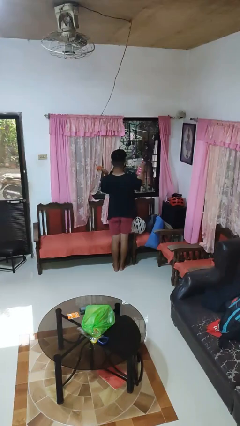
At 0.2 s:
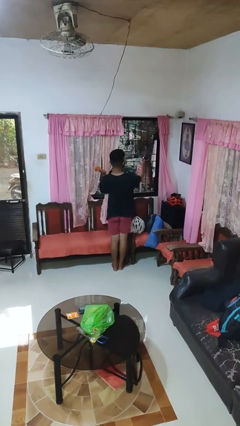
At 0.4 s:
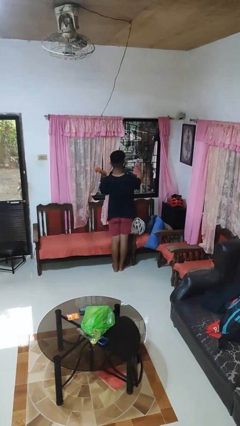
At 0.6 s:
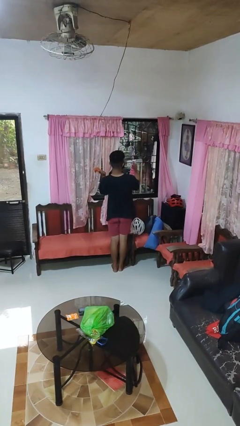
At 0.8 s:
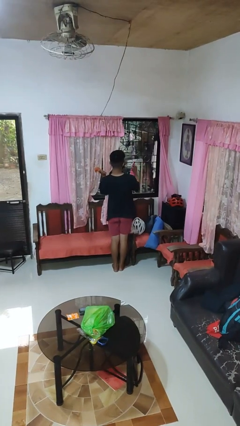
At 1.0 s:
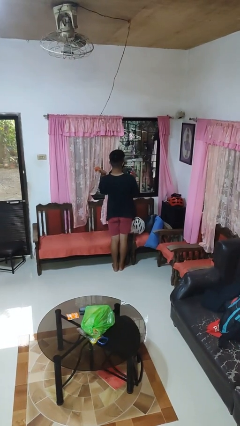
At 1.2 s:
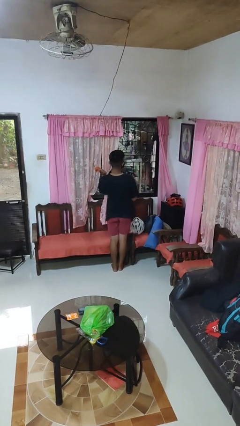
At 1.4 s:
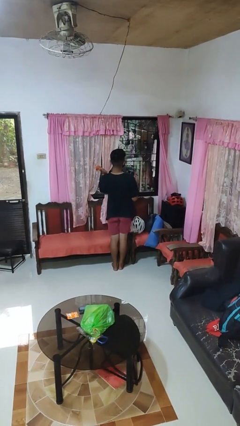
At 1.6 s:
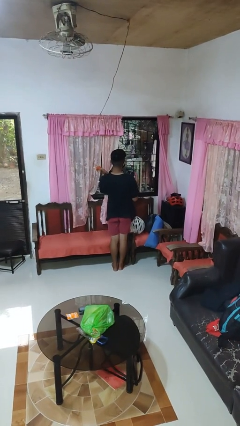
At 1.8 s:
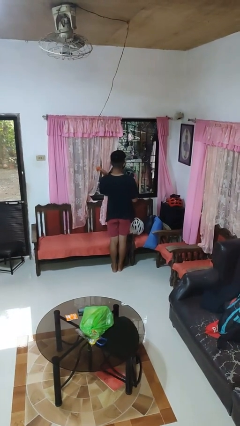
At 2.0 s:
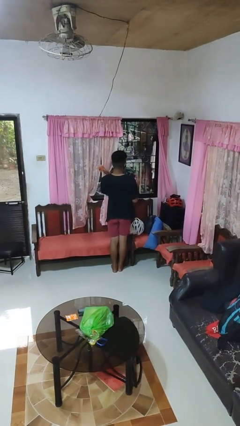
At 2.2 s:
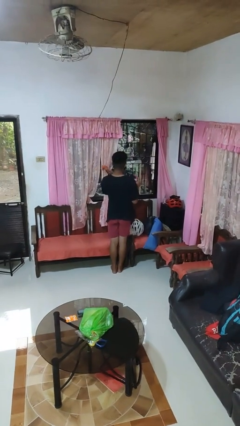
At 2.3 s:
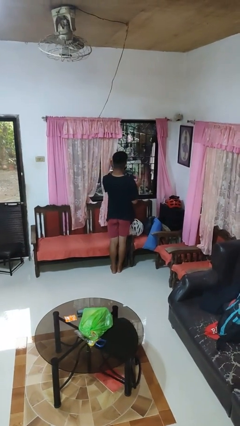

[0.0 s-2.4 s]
person sprays from bottle

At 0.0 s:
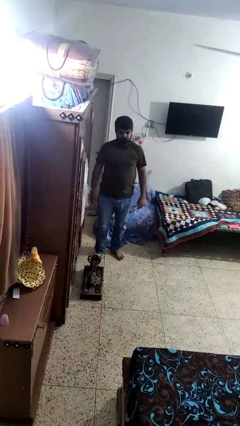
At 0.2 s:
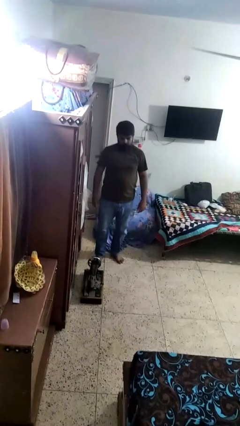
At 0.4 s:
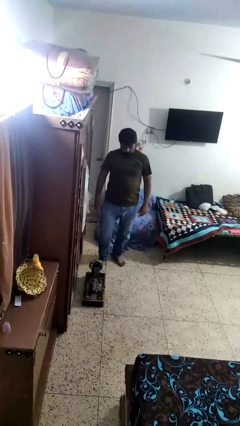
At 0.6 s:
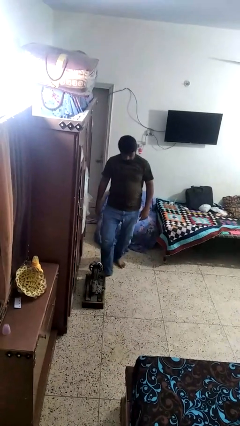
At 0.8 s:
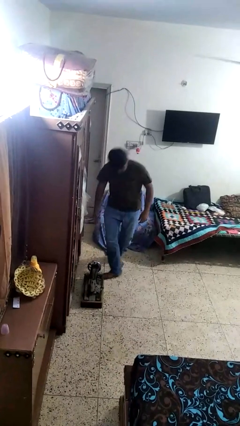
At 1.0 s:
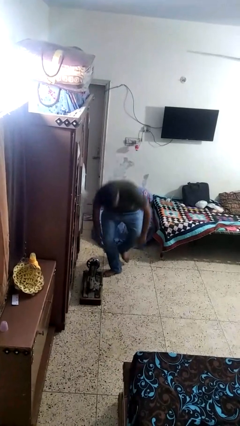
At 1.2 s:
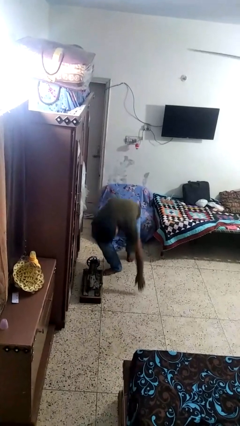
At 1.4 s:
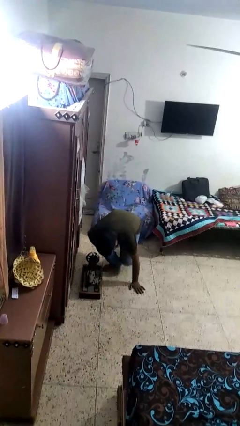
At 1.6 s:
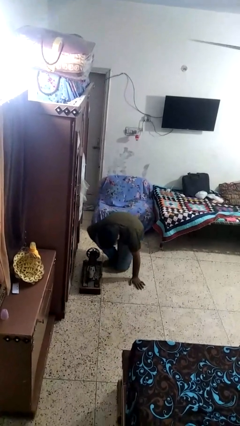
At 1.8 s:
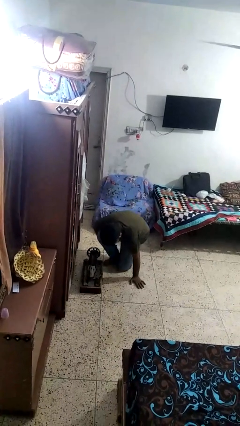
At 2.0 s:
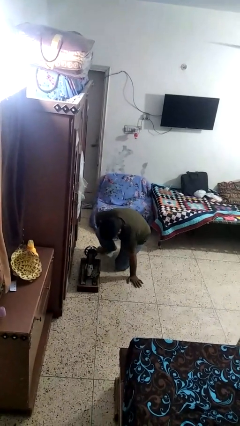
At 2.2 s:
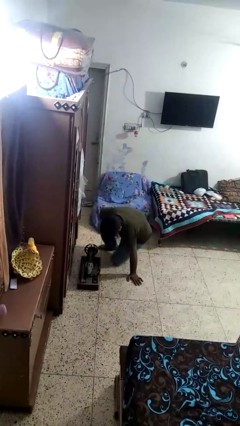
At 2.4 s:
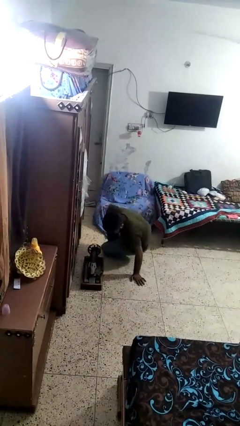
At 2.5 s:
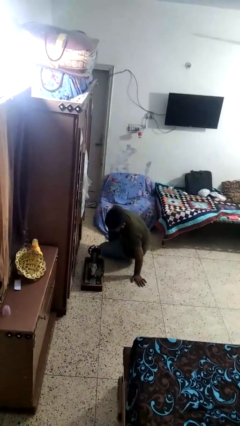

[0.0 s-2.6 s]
person trips on object on floor

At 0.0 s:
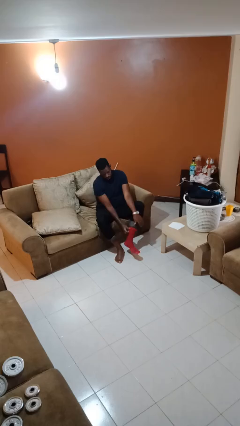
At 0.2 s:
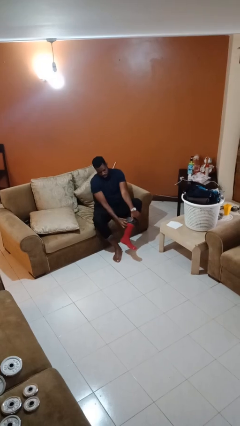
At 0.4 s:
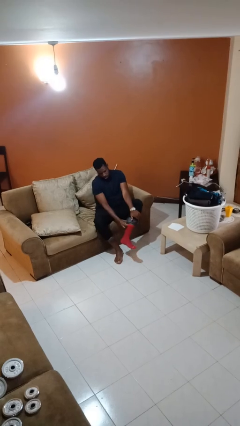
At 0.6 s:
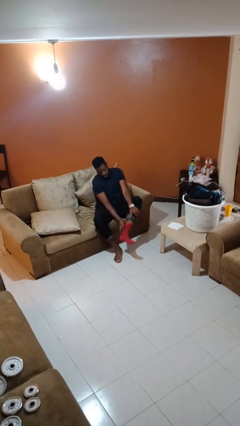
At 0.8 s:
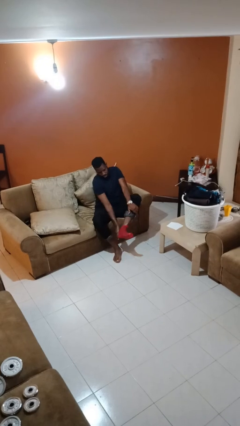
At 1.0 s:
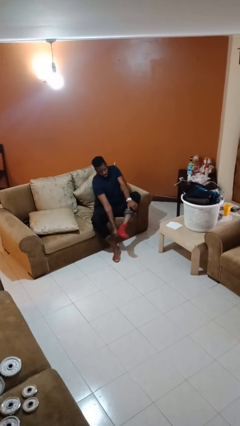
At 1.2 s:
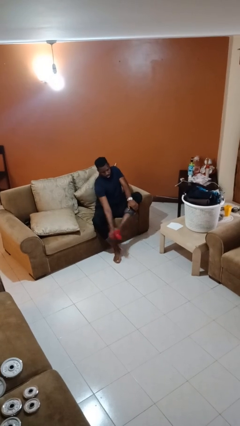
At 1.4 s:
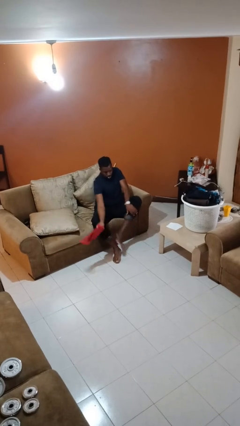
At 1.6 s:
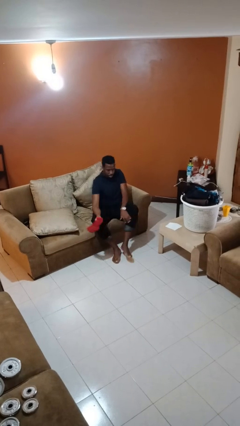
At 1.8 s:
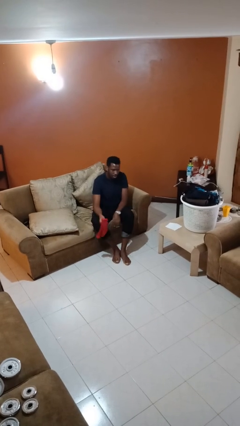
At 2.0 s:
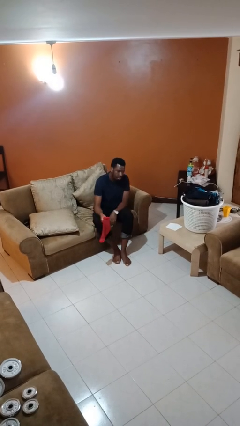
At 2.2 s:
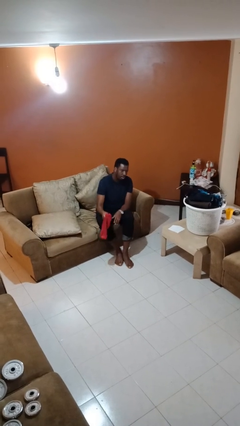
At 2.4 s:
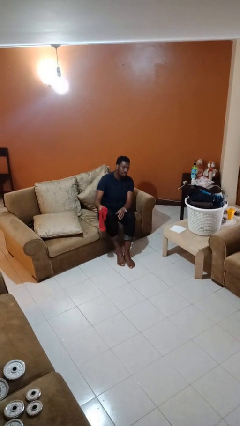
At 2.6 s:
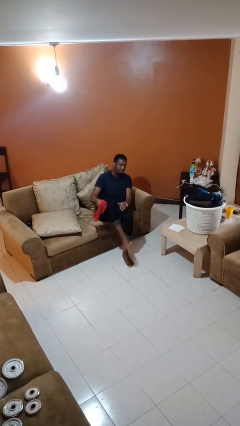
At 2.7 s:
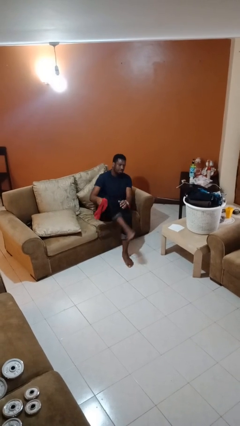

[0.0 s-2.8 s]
person takes off socks

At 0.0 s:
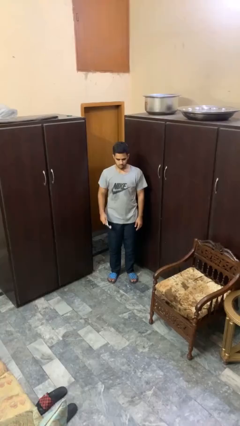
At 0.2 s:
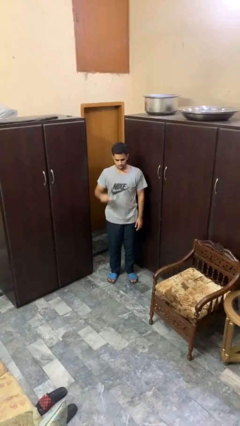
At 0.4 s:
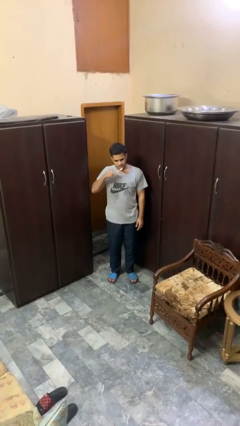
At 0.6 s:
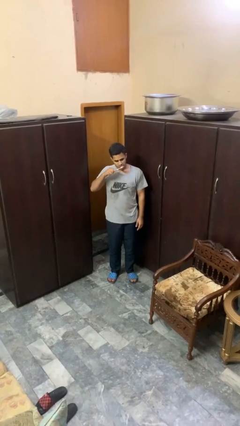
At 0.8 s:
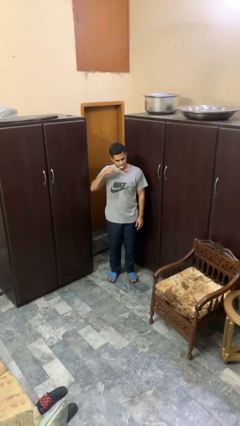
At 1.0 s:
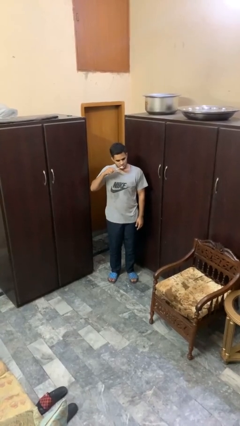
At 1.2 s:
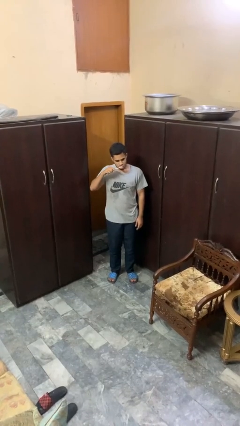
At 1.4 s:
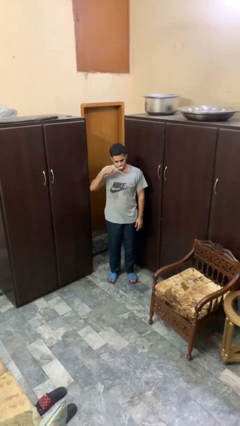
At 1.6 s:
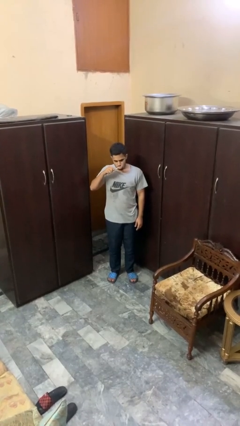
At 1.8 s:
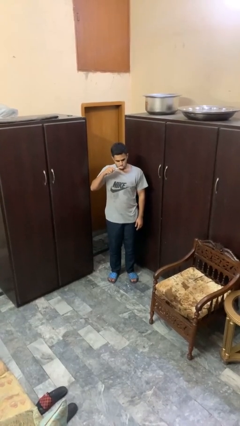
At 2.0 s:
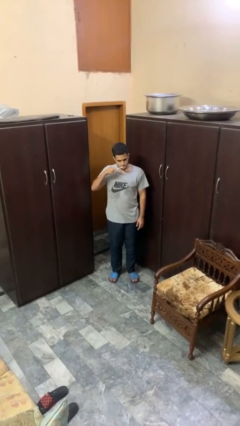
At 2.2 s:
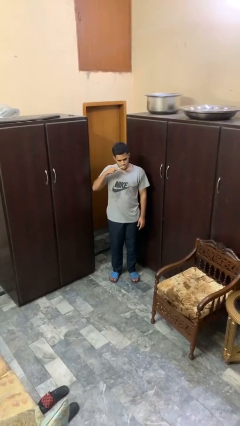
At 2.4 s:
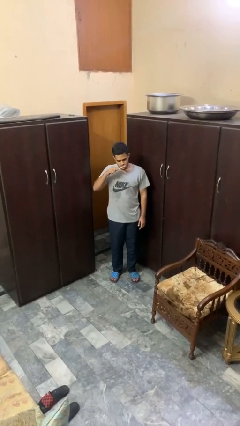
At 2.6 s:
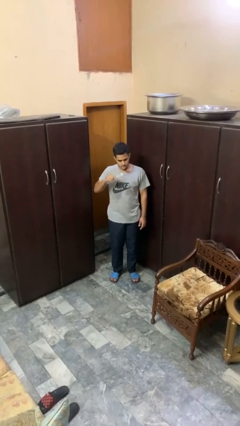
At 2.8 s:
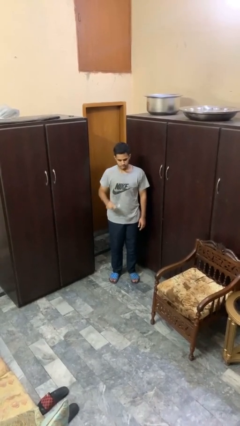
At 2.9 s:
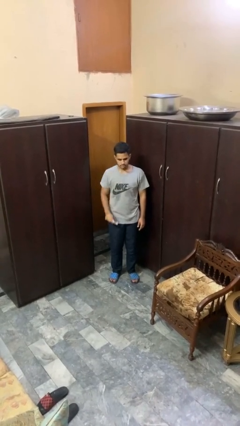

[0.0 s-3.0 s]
person brushes teeth

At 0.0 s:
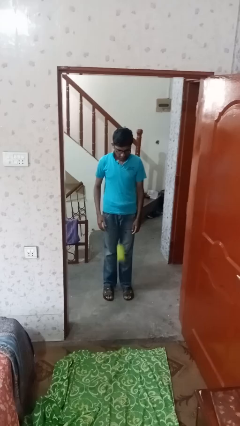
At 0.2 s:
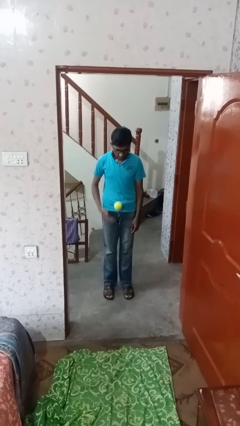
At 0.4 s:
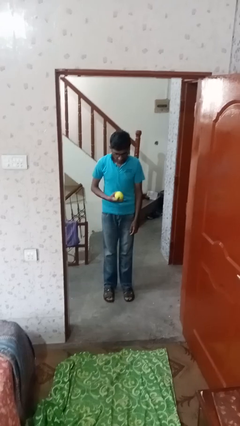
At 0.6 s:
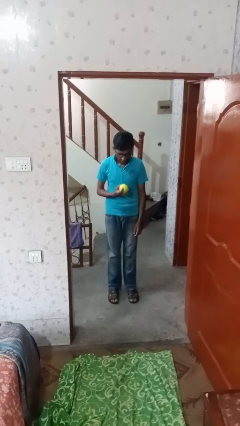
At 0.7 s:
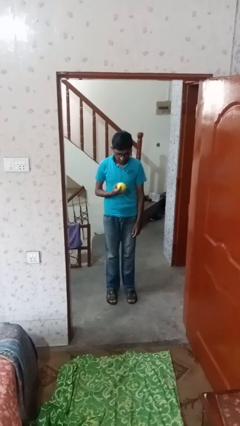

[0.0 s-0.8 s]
person bounces ball on floor

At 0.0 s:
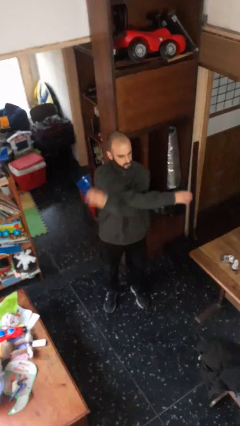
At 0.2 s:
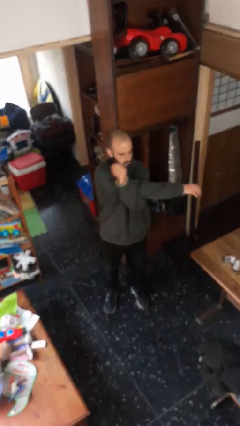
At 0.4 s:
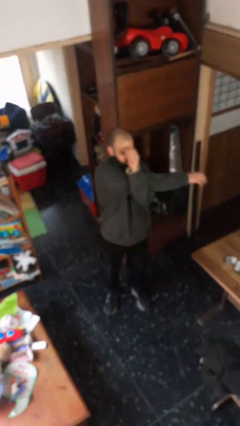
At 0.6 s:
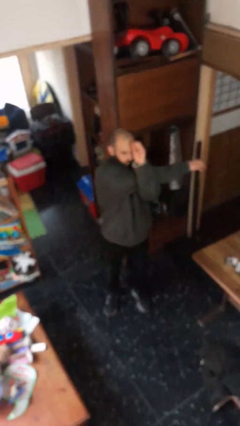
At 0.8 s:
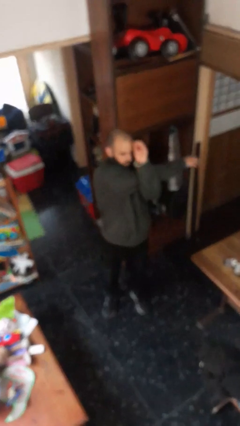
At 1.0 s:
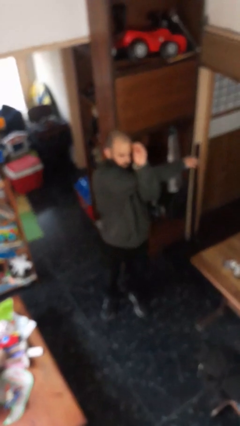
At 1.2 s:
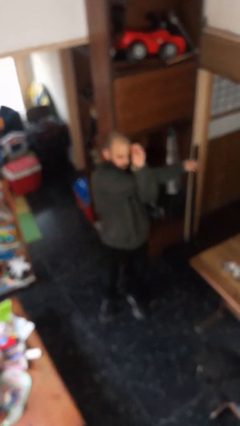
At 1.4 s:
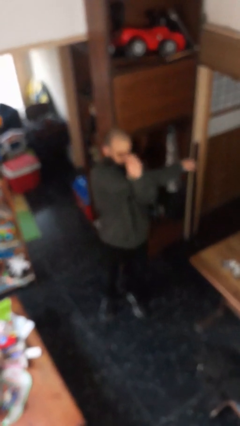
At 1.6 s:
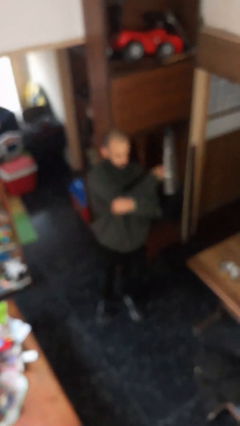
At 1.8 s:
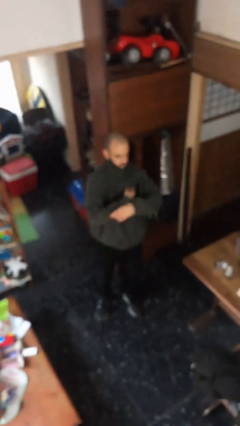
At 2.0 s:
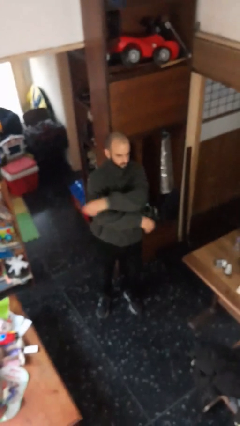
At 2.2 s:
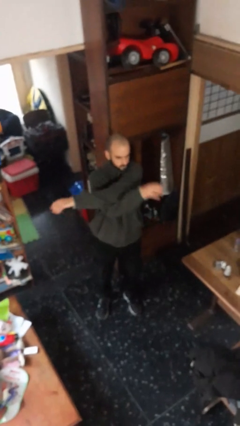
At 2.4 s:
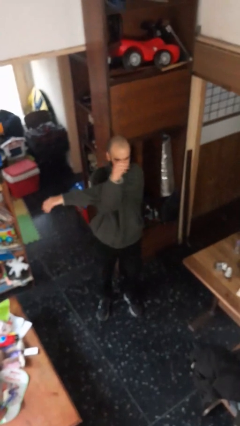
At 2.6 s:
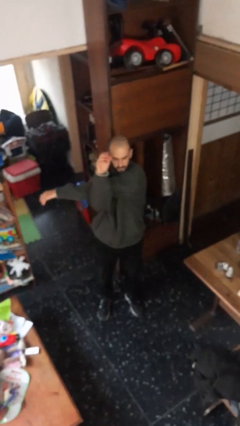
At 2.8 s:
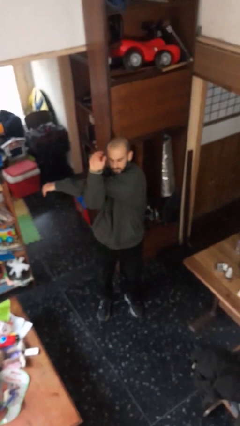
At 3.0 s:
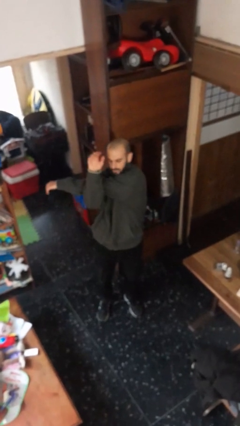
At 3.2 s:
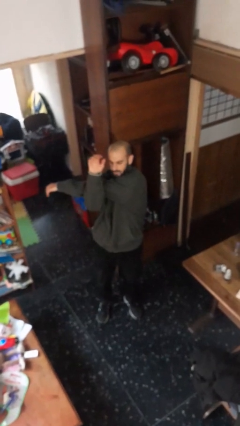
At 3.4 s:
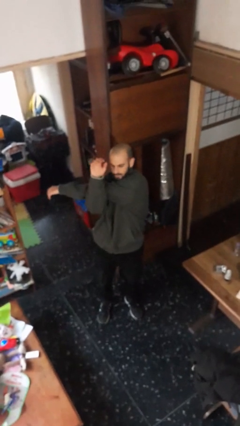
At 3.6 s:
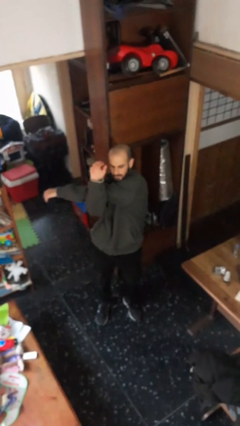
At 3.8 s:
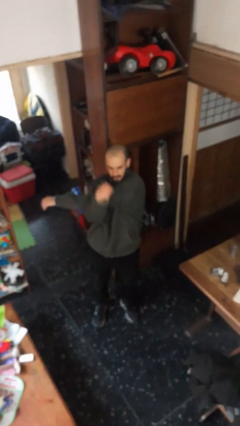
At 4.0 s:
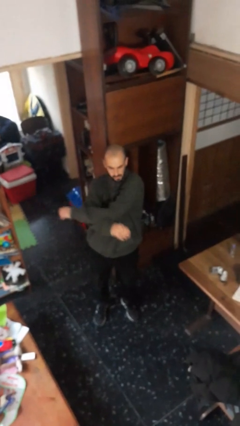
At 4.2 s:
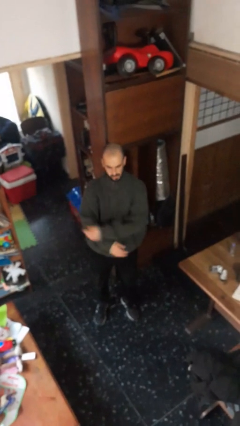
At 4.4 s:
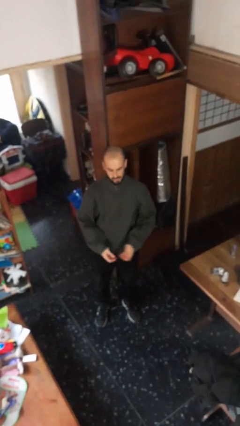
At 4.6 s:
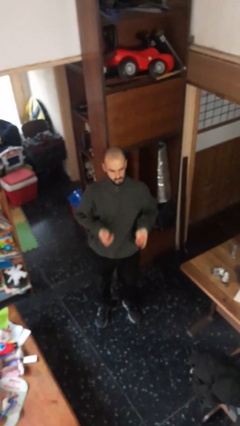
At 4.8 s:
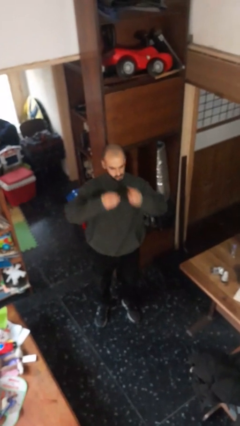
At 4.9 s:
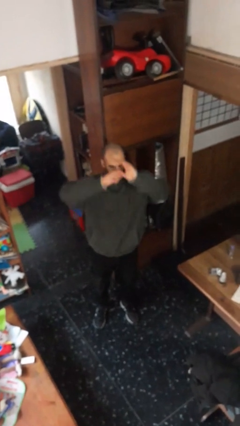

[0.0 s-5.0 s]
person stretches arms to side

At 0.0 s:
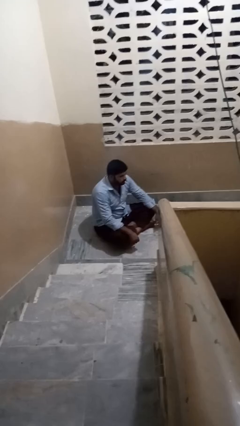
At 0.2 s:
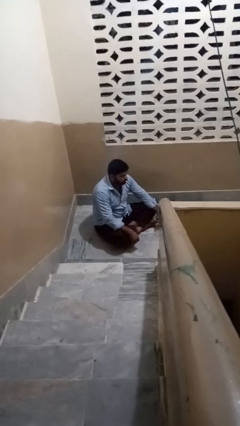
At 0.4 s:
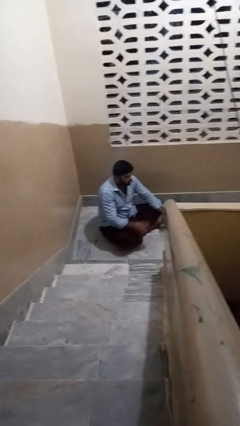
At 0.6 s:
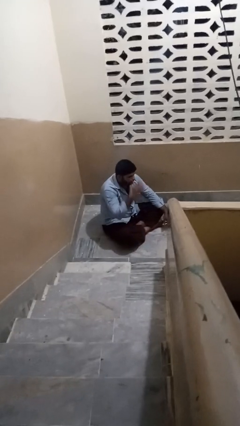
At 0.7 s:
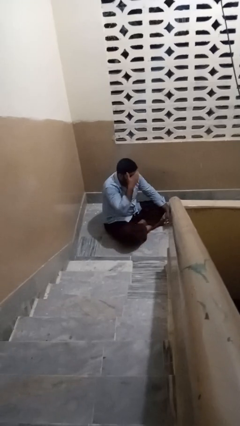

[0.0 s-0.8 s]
person covers face with hands

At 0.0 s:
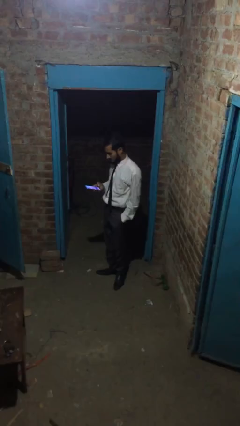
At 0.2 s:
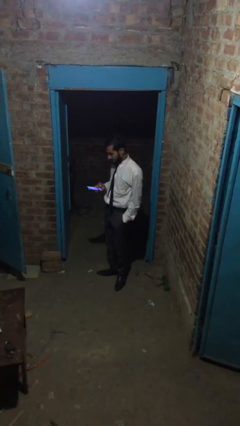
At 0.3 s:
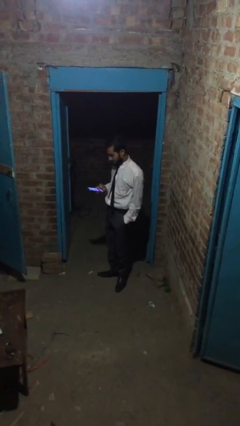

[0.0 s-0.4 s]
person exits scene through structure
